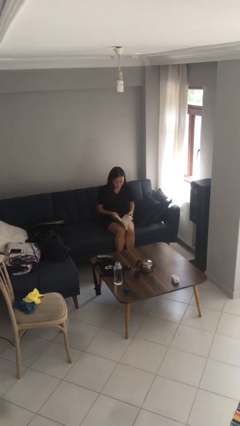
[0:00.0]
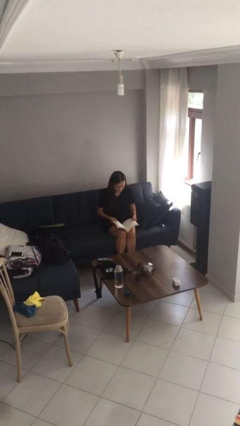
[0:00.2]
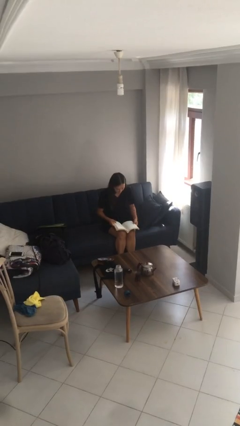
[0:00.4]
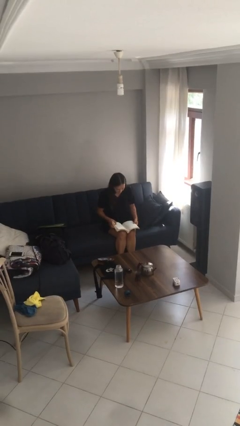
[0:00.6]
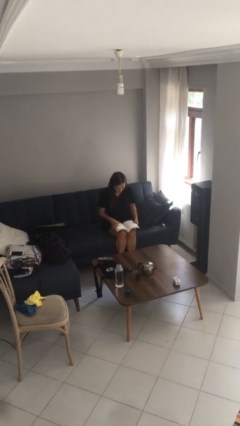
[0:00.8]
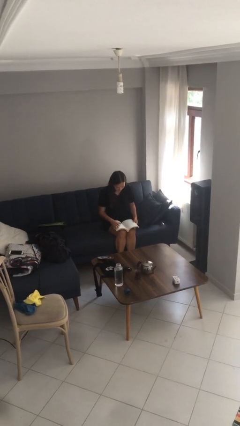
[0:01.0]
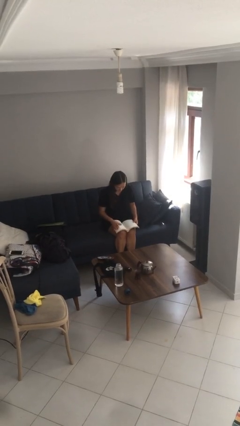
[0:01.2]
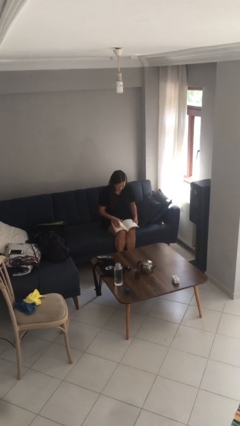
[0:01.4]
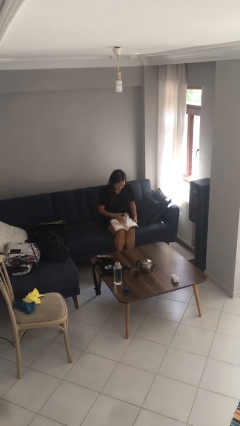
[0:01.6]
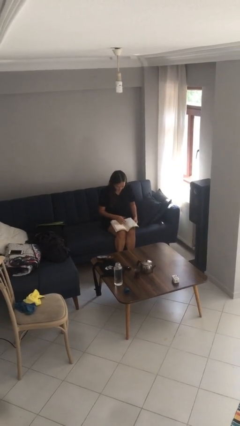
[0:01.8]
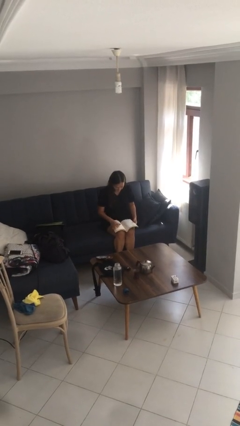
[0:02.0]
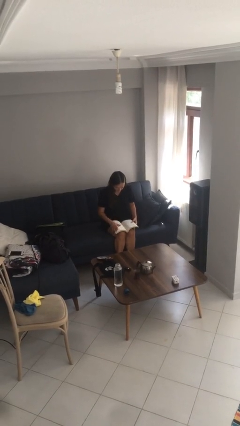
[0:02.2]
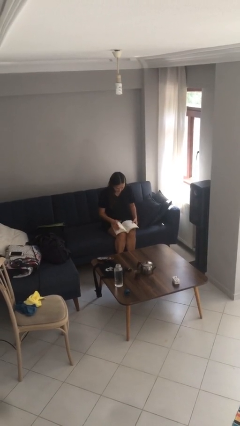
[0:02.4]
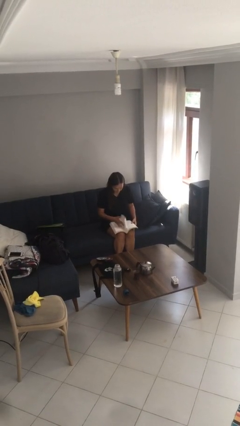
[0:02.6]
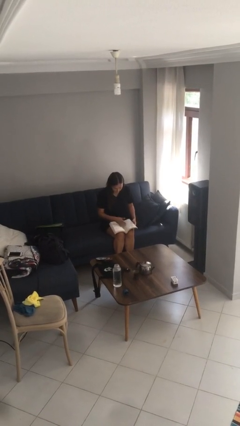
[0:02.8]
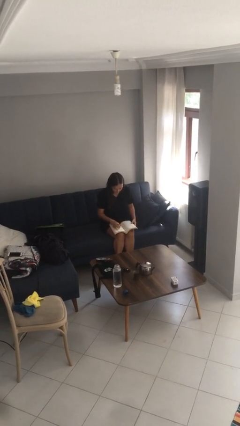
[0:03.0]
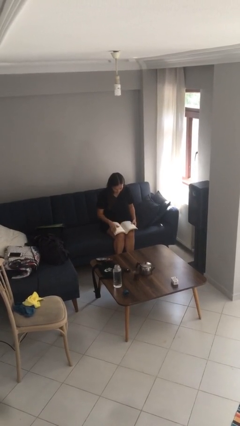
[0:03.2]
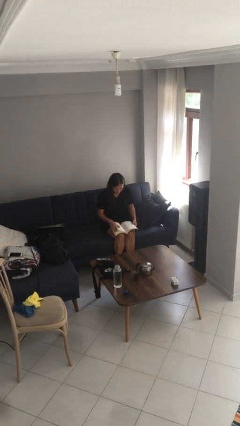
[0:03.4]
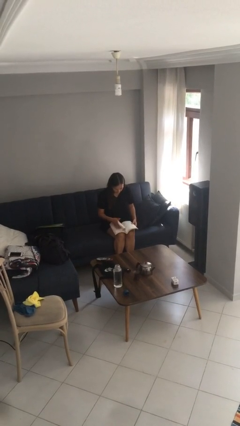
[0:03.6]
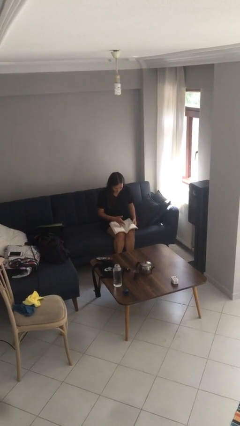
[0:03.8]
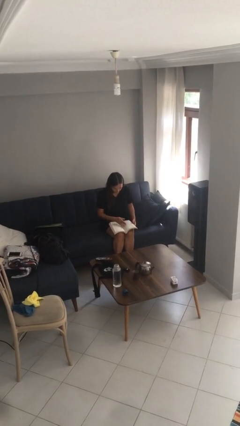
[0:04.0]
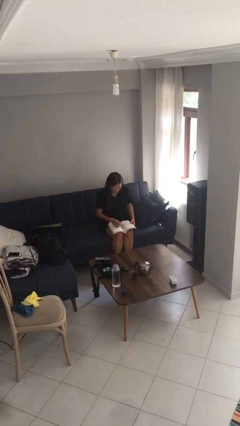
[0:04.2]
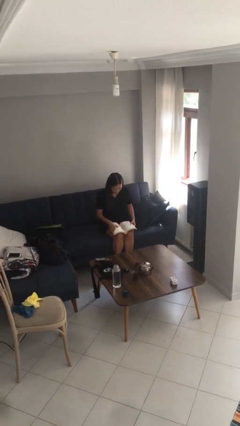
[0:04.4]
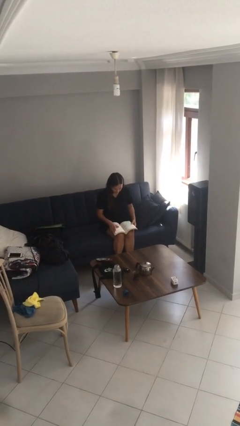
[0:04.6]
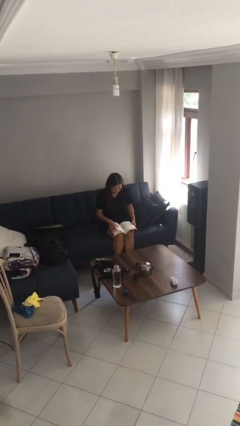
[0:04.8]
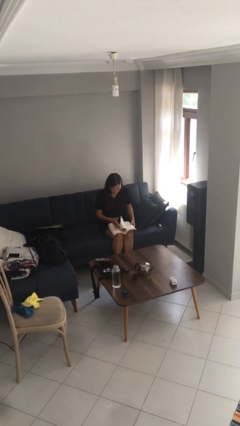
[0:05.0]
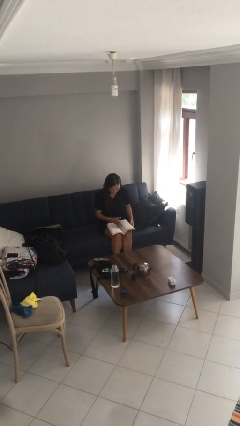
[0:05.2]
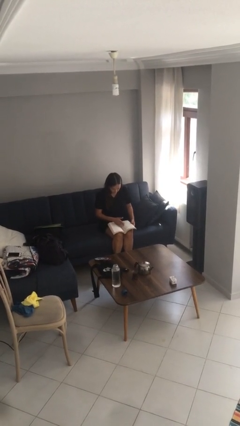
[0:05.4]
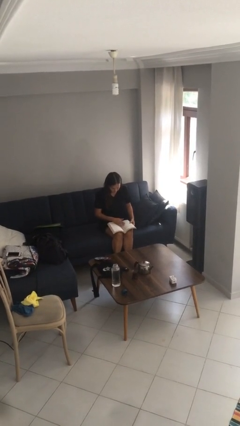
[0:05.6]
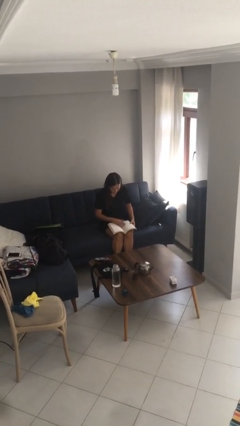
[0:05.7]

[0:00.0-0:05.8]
person reads document

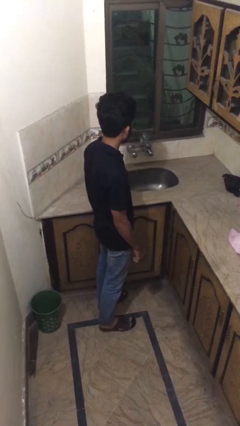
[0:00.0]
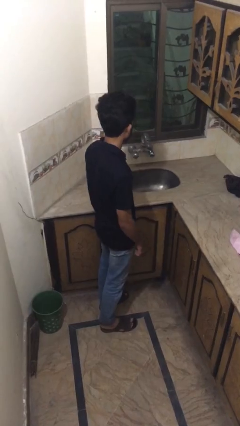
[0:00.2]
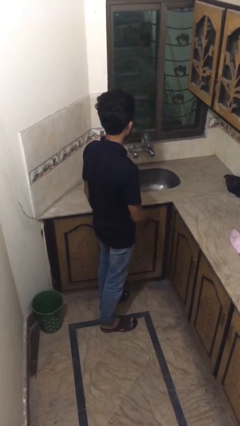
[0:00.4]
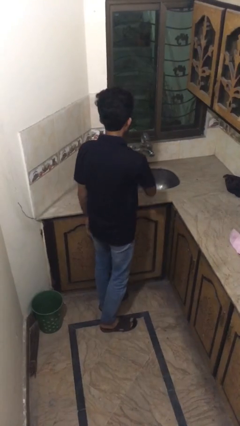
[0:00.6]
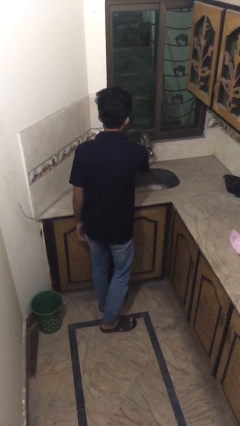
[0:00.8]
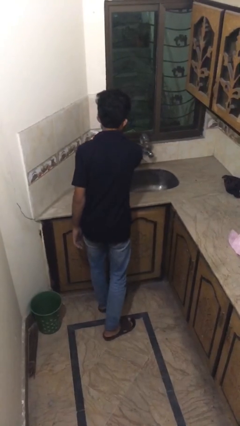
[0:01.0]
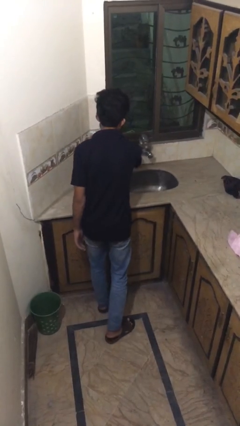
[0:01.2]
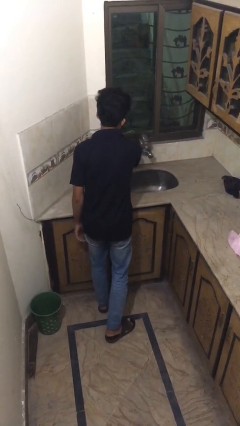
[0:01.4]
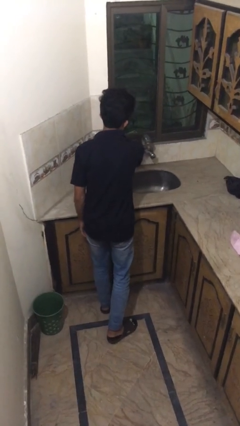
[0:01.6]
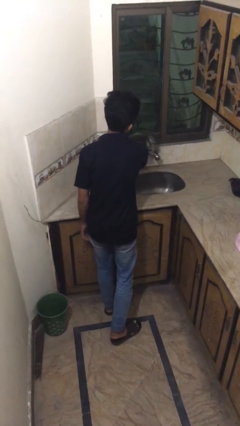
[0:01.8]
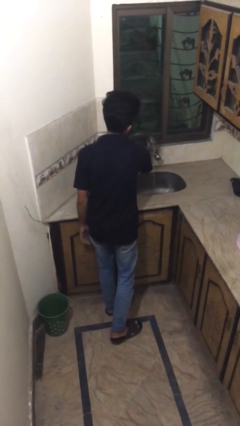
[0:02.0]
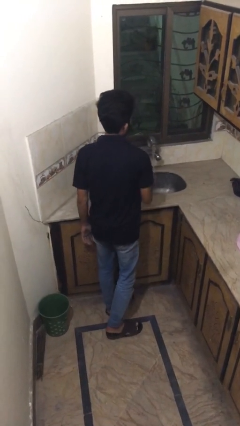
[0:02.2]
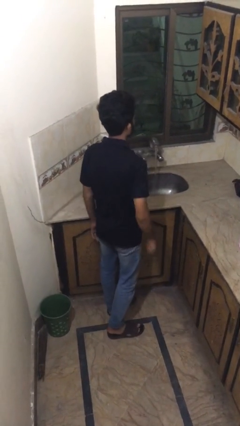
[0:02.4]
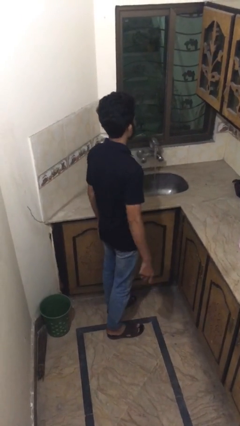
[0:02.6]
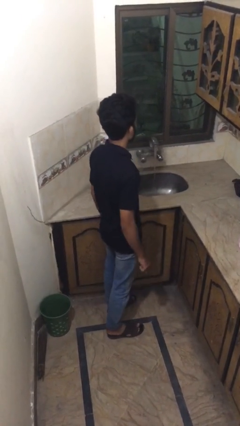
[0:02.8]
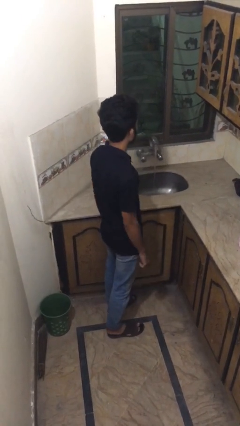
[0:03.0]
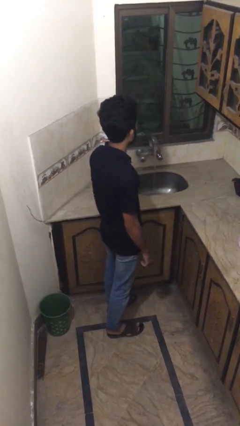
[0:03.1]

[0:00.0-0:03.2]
person turns on faucet

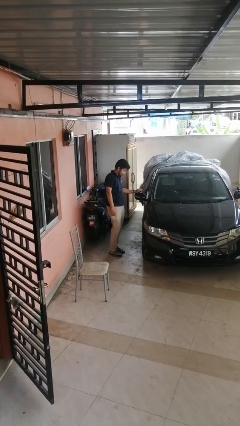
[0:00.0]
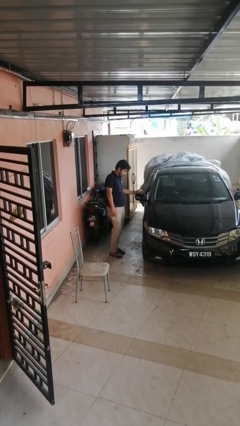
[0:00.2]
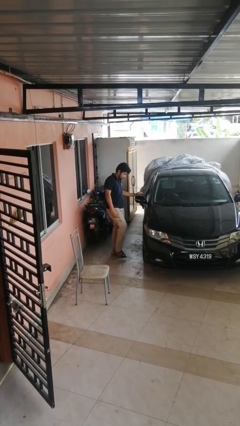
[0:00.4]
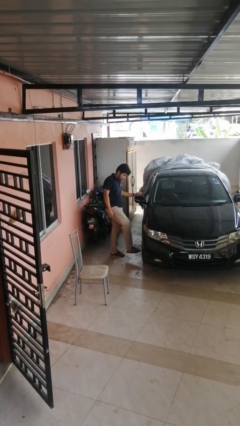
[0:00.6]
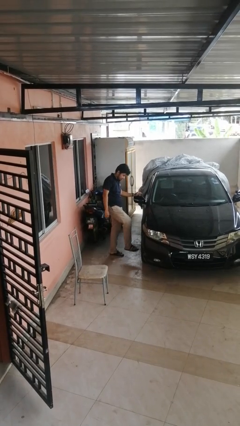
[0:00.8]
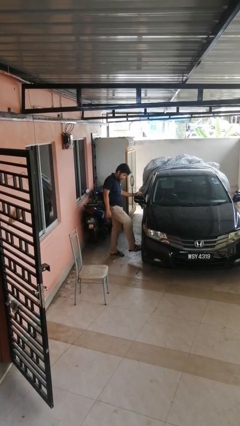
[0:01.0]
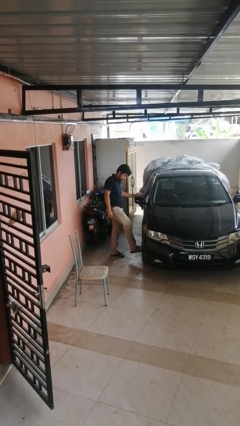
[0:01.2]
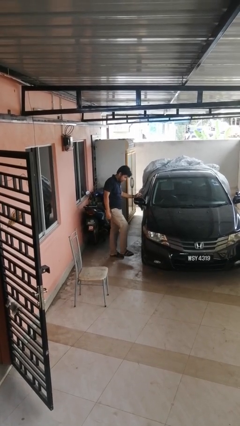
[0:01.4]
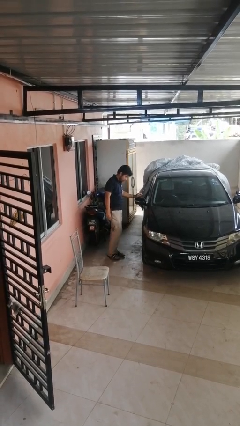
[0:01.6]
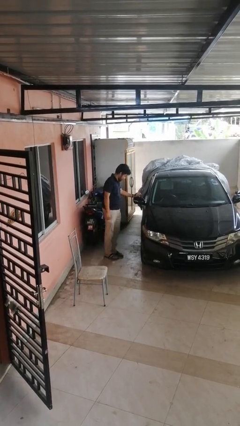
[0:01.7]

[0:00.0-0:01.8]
person kicks car tires

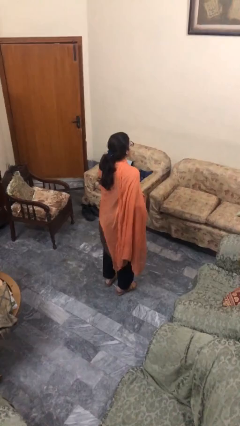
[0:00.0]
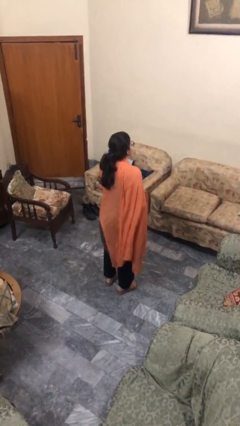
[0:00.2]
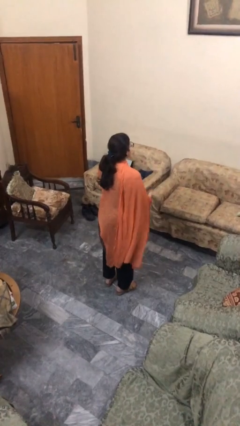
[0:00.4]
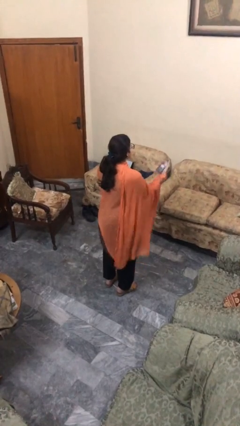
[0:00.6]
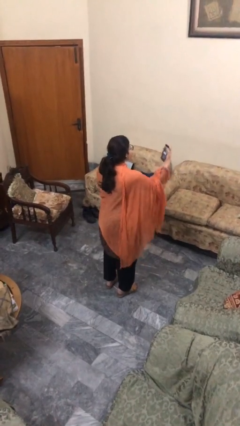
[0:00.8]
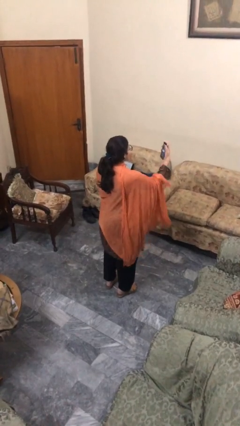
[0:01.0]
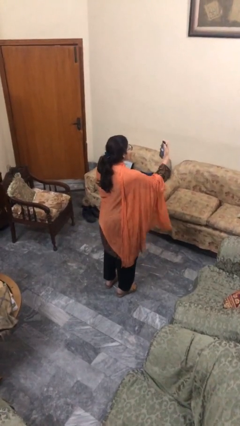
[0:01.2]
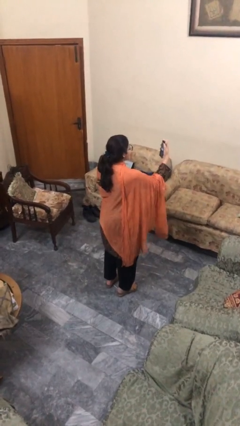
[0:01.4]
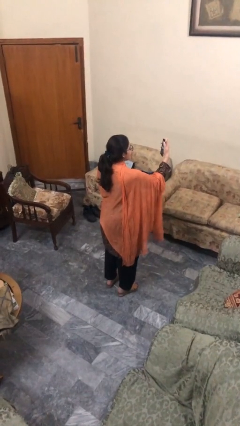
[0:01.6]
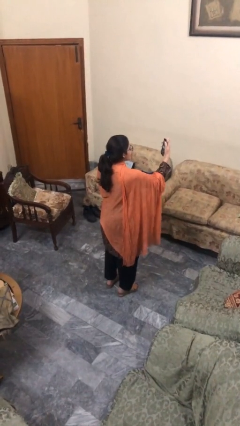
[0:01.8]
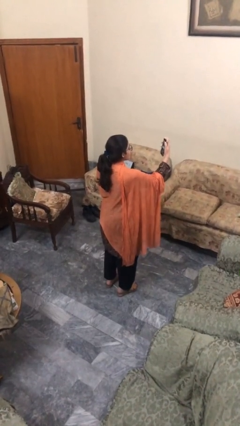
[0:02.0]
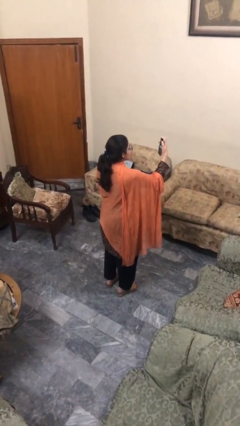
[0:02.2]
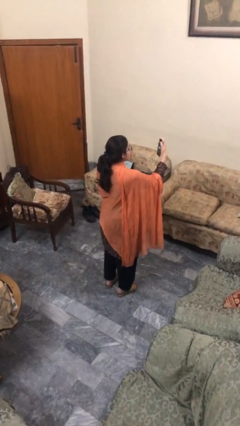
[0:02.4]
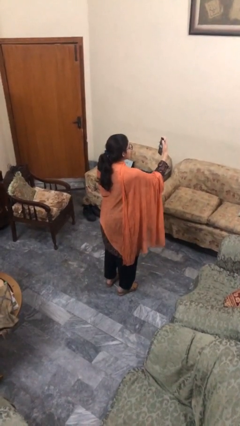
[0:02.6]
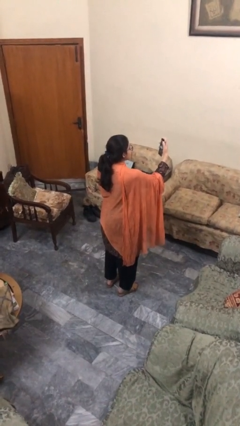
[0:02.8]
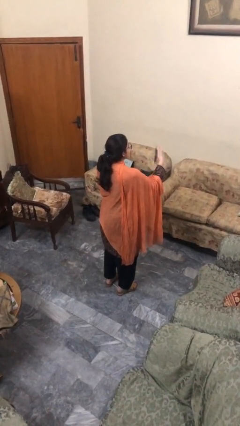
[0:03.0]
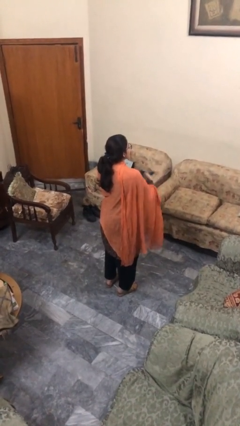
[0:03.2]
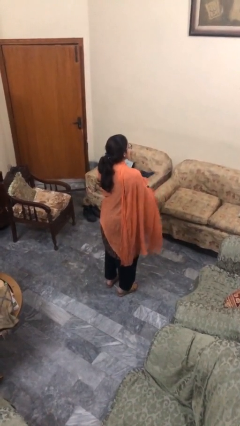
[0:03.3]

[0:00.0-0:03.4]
person takes phone from pocket

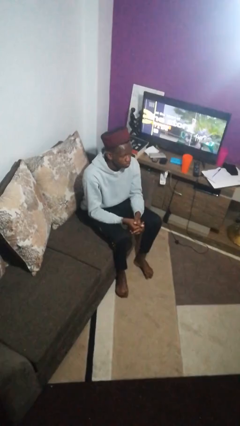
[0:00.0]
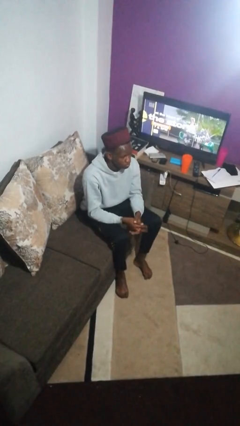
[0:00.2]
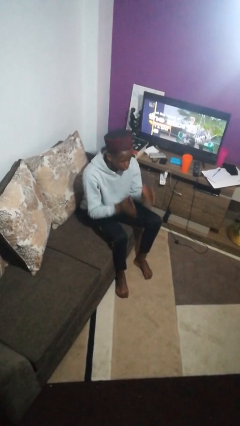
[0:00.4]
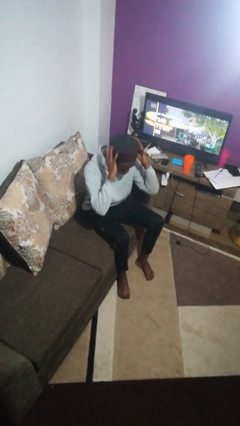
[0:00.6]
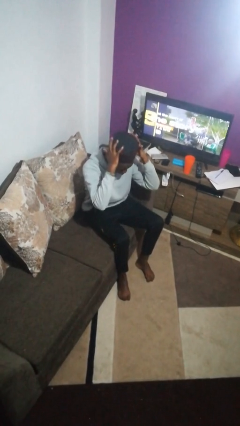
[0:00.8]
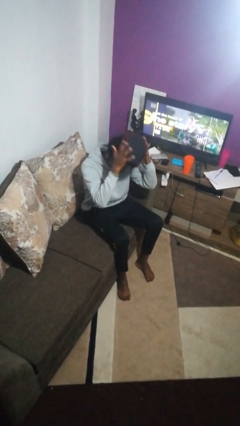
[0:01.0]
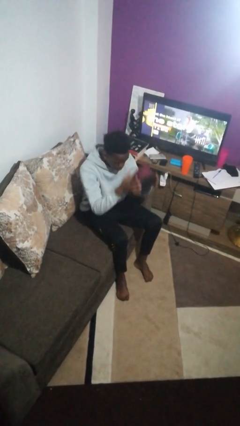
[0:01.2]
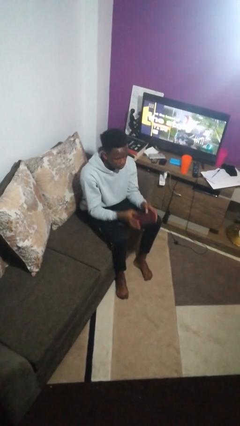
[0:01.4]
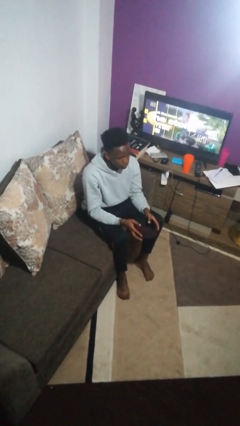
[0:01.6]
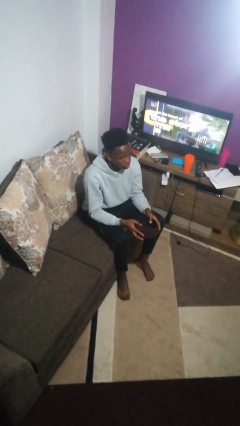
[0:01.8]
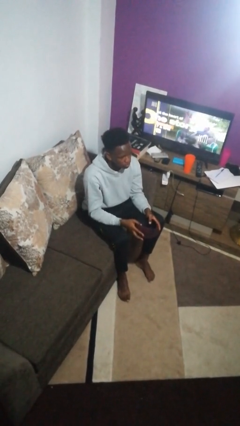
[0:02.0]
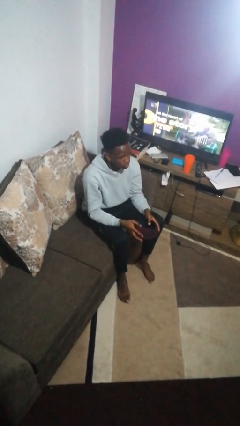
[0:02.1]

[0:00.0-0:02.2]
person takes off hat

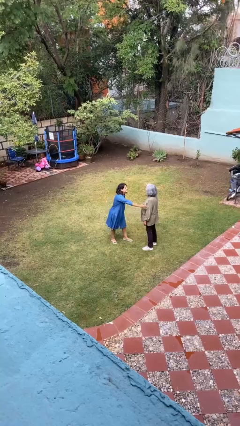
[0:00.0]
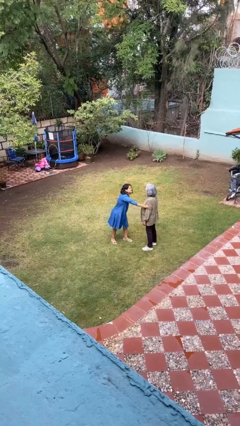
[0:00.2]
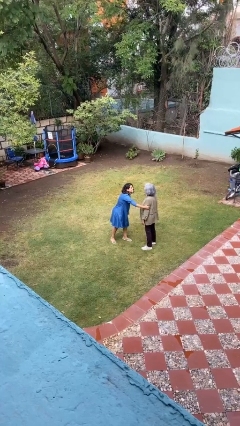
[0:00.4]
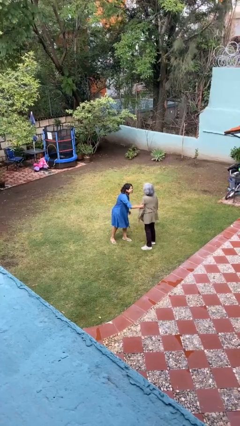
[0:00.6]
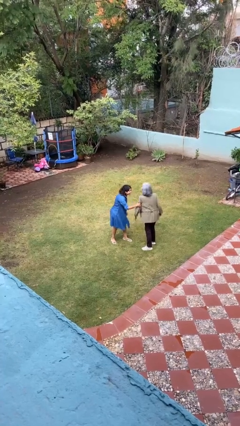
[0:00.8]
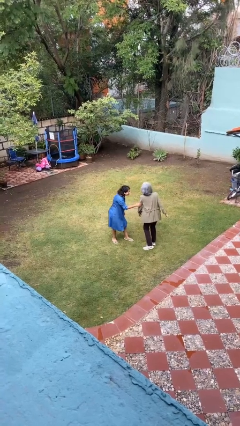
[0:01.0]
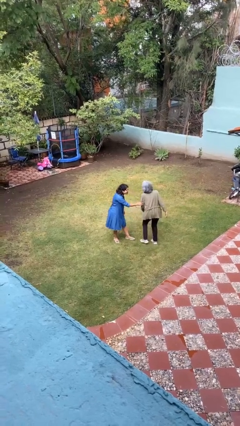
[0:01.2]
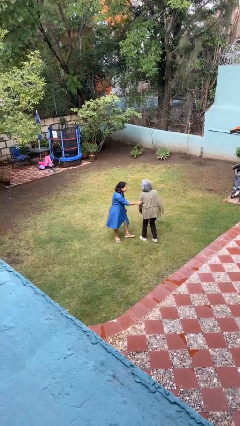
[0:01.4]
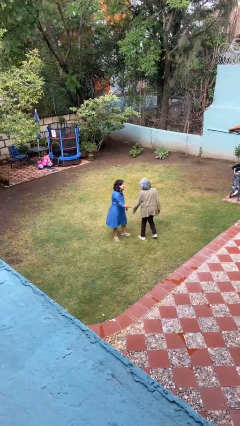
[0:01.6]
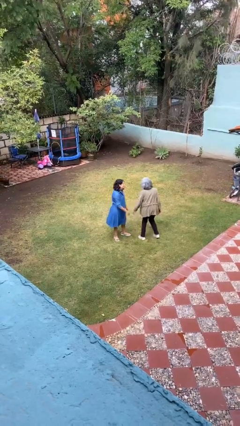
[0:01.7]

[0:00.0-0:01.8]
person grabs person by bicep
